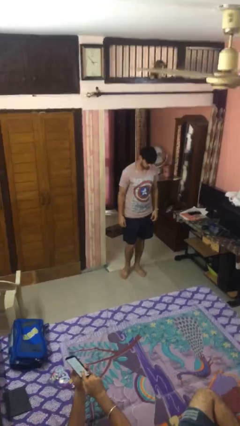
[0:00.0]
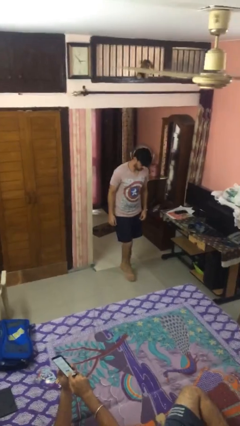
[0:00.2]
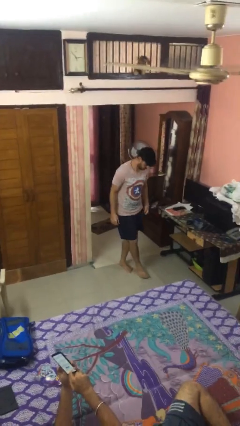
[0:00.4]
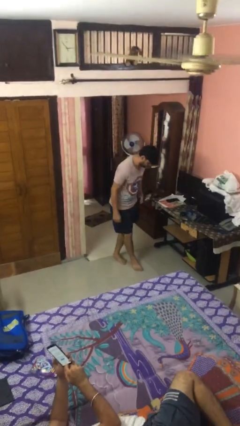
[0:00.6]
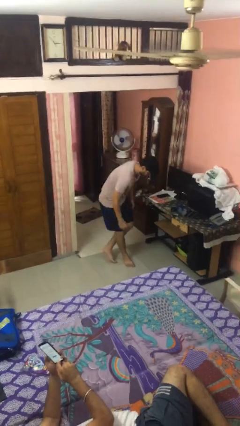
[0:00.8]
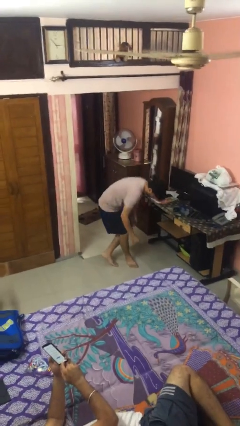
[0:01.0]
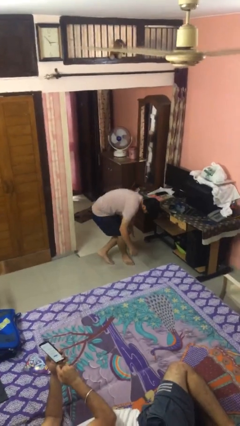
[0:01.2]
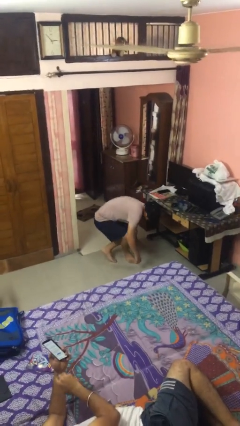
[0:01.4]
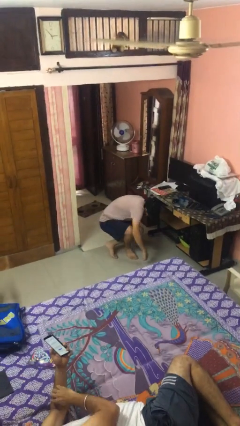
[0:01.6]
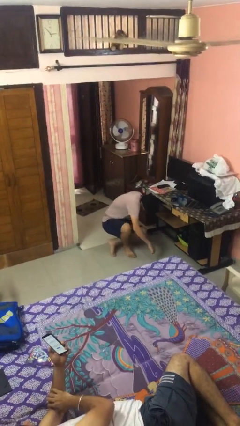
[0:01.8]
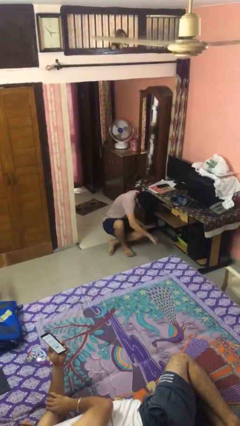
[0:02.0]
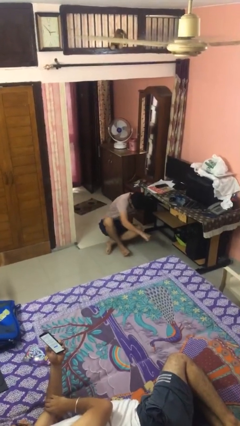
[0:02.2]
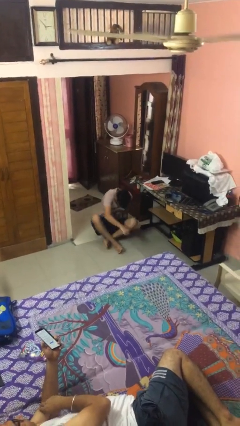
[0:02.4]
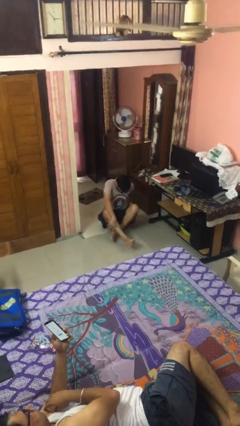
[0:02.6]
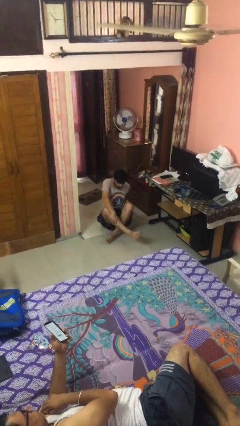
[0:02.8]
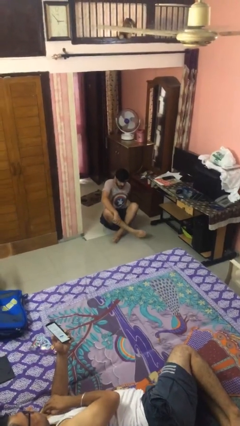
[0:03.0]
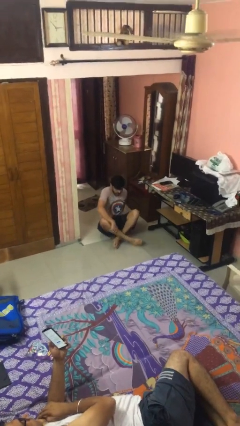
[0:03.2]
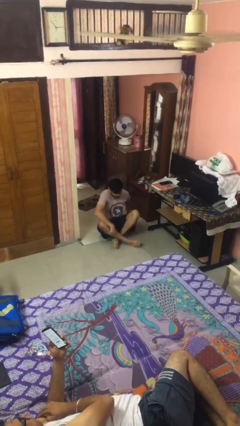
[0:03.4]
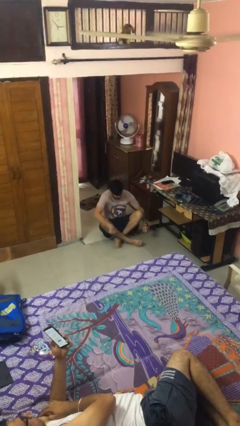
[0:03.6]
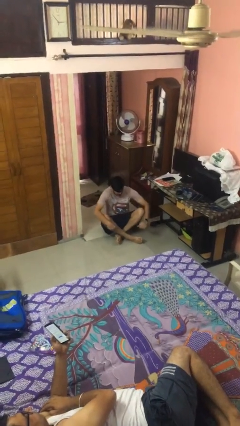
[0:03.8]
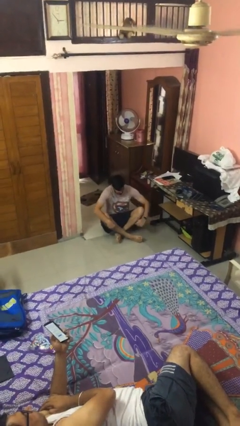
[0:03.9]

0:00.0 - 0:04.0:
person sits crisscross

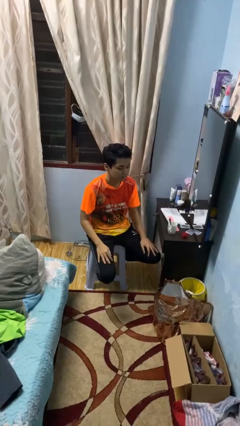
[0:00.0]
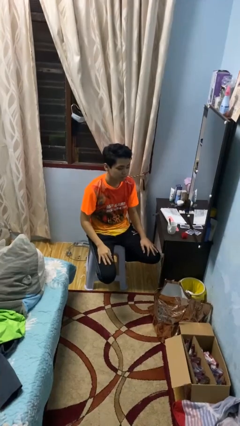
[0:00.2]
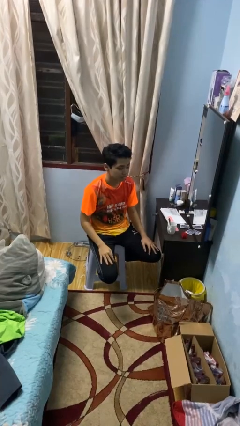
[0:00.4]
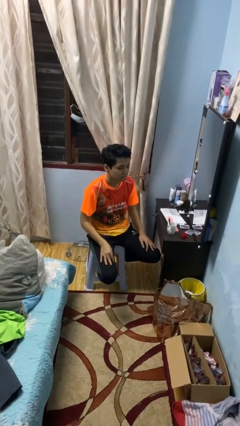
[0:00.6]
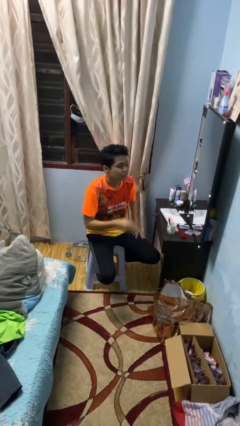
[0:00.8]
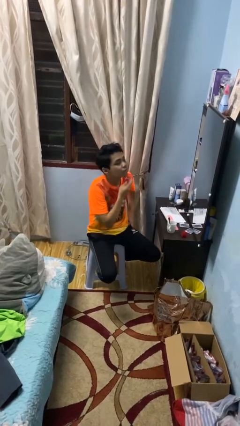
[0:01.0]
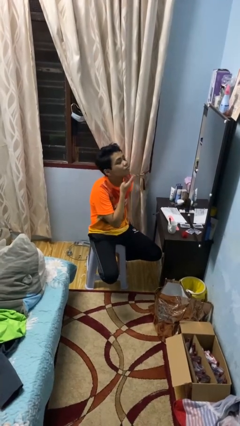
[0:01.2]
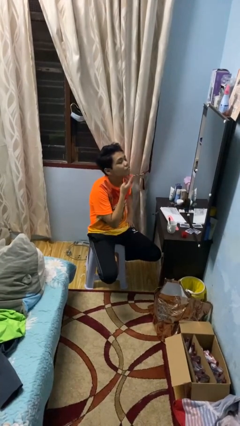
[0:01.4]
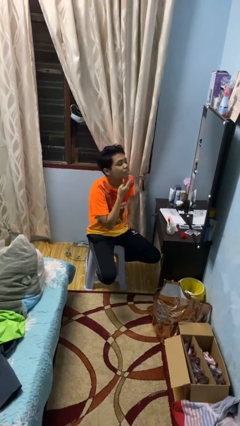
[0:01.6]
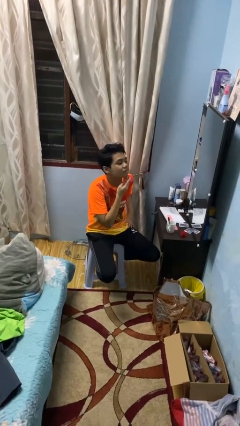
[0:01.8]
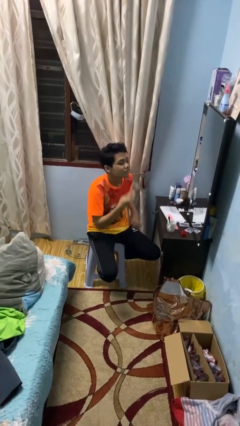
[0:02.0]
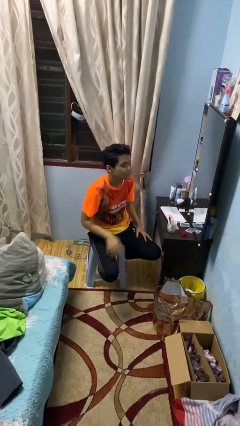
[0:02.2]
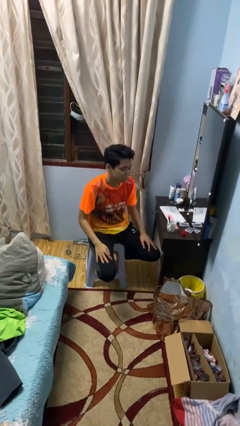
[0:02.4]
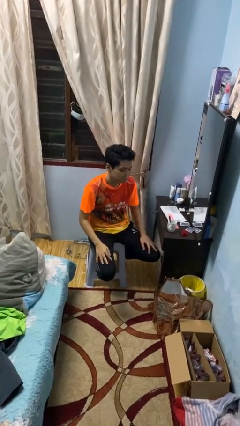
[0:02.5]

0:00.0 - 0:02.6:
person strokes chin

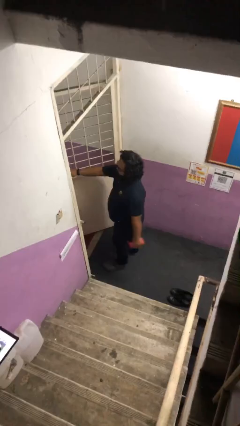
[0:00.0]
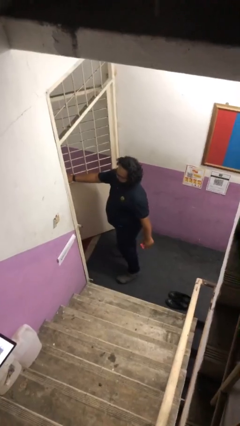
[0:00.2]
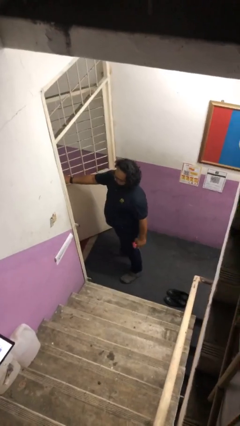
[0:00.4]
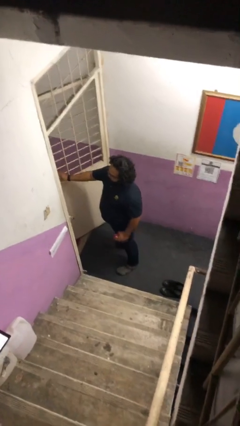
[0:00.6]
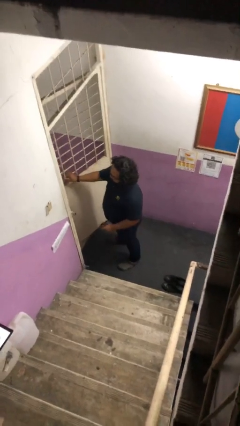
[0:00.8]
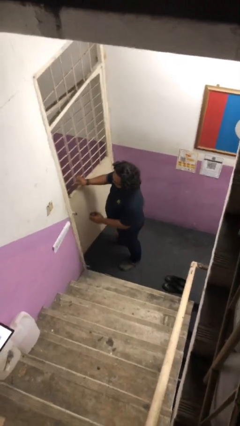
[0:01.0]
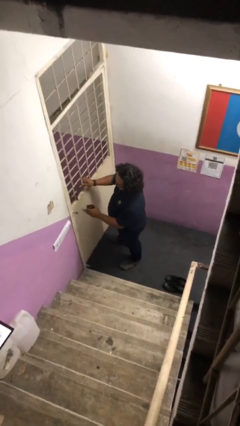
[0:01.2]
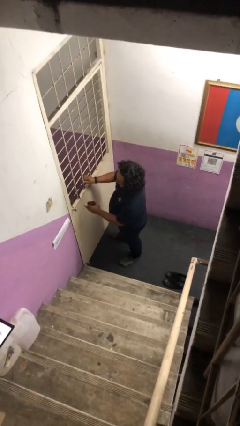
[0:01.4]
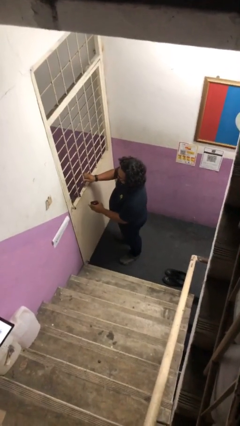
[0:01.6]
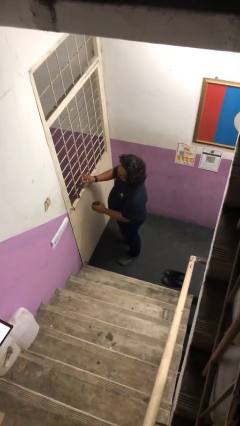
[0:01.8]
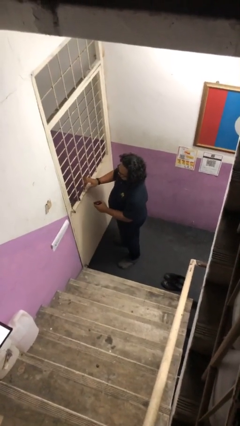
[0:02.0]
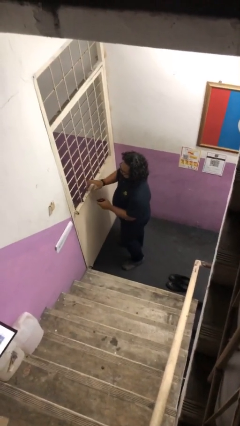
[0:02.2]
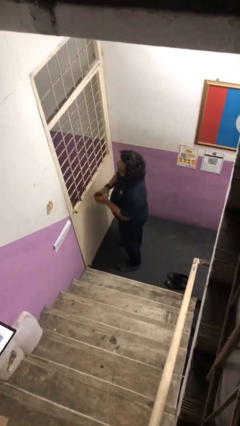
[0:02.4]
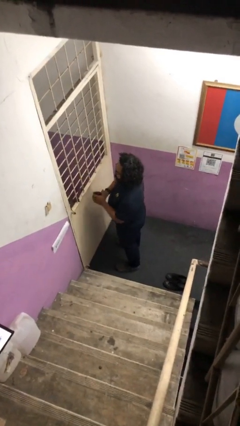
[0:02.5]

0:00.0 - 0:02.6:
person closes facility door

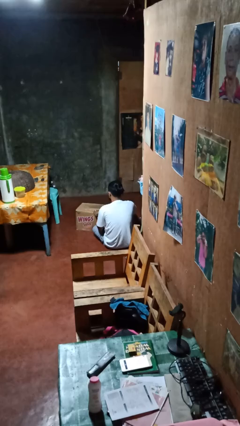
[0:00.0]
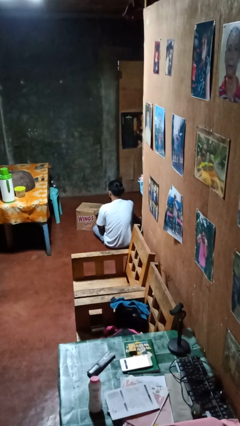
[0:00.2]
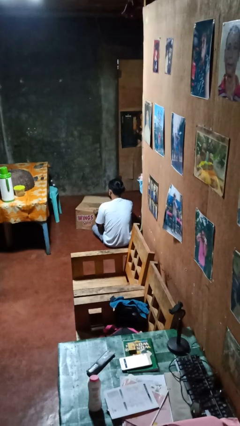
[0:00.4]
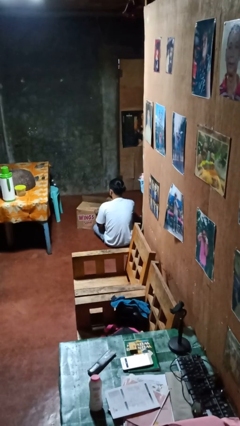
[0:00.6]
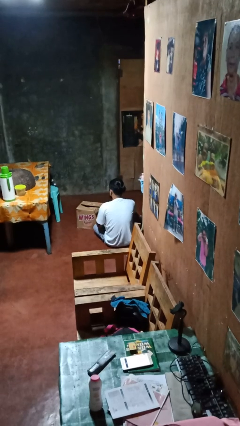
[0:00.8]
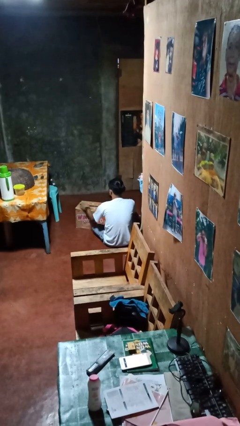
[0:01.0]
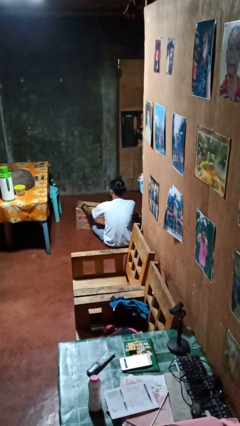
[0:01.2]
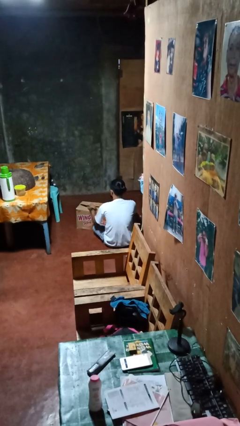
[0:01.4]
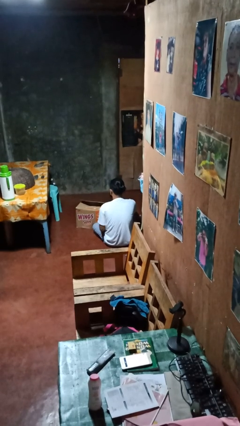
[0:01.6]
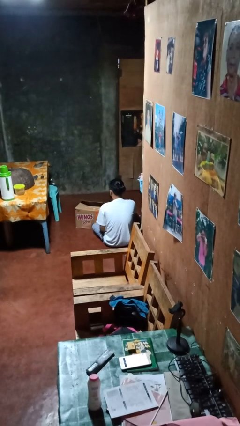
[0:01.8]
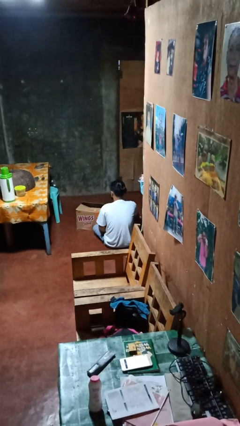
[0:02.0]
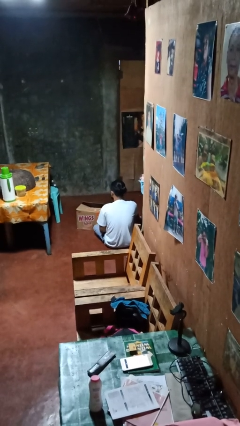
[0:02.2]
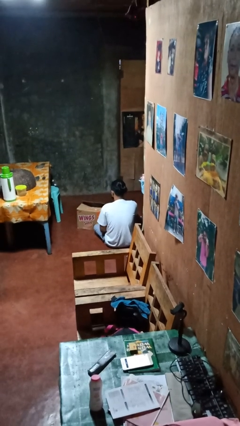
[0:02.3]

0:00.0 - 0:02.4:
person closes box

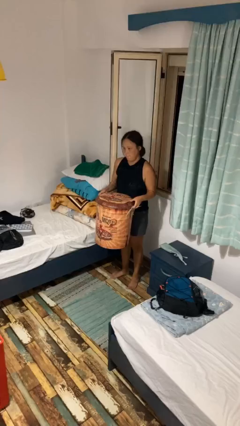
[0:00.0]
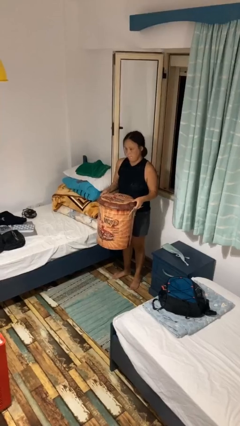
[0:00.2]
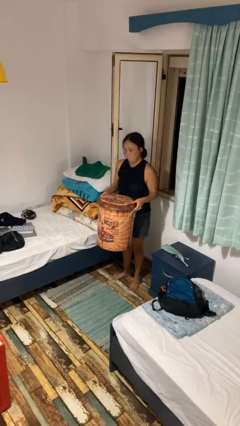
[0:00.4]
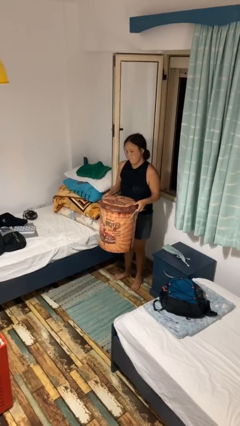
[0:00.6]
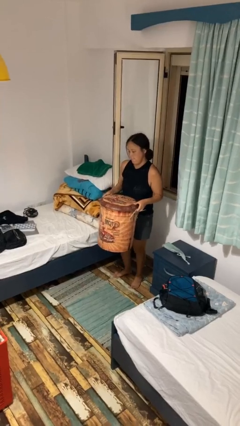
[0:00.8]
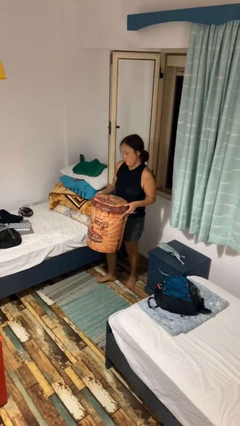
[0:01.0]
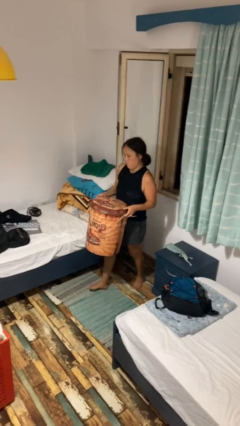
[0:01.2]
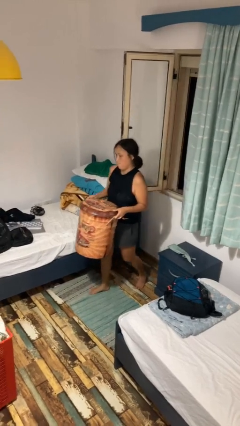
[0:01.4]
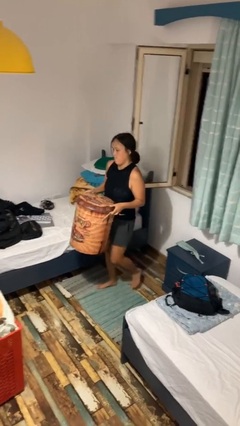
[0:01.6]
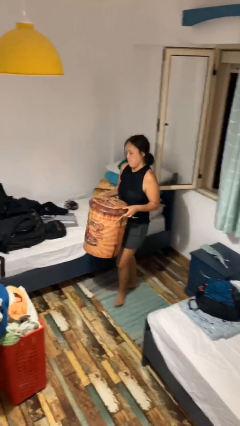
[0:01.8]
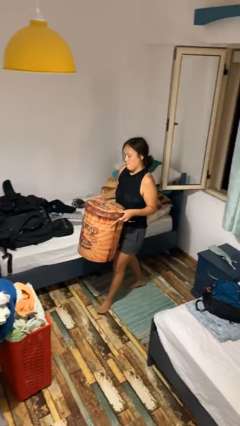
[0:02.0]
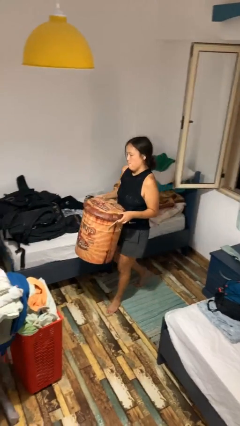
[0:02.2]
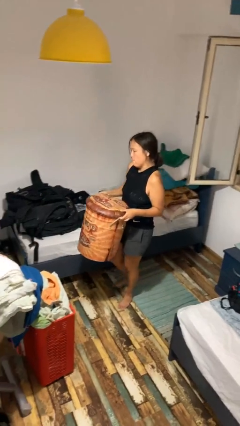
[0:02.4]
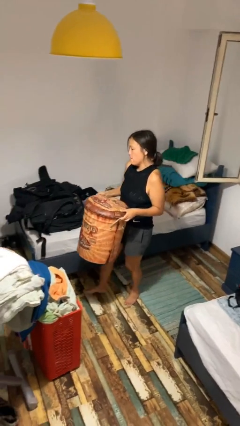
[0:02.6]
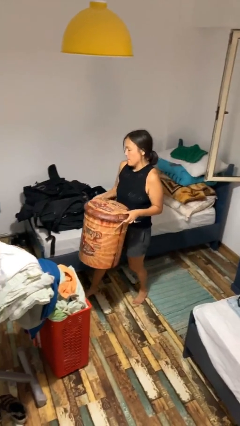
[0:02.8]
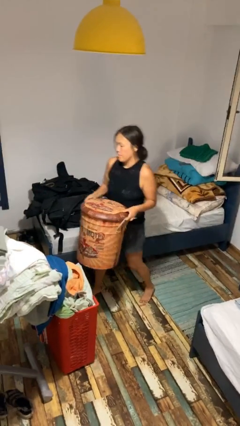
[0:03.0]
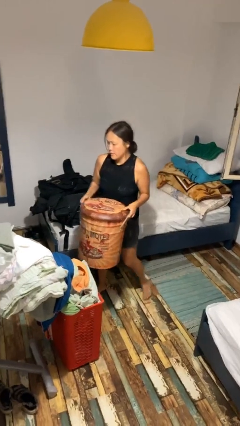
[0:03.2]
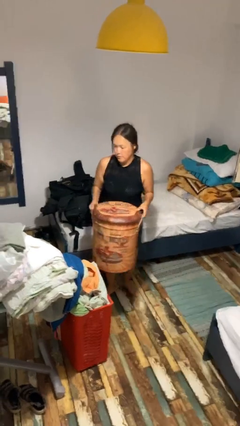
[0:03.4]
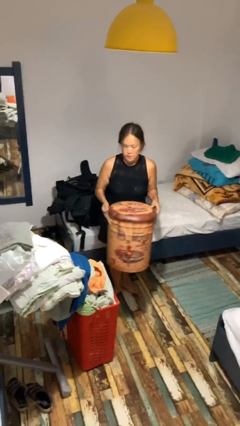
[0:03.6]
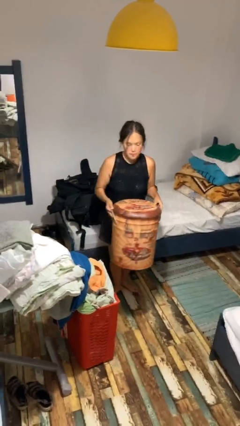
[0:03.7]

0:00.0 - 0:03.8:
person carries furniture

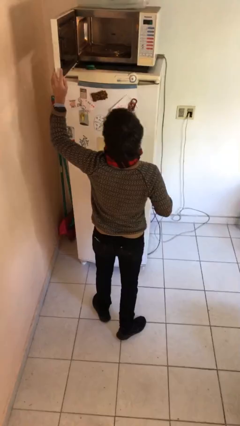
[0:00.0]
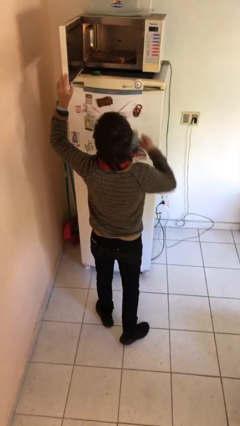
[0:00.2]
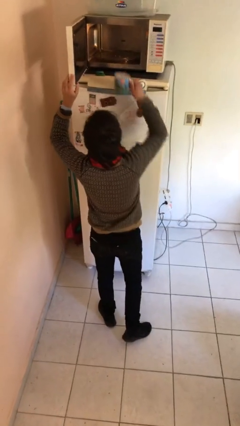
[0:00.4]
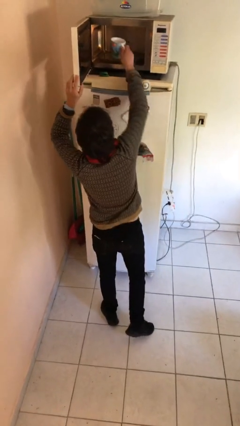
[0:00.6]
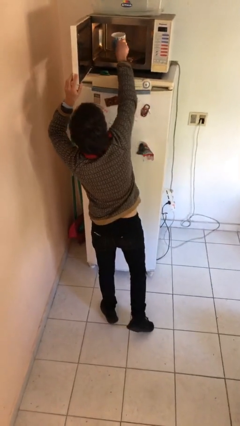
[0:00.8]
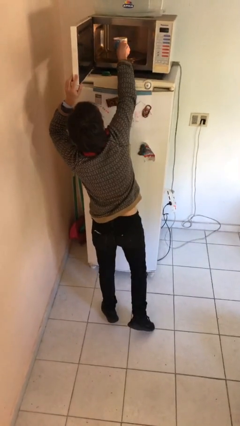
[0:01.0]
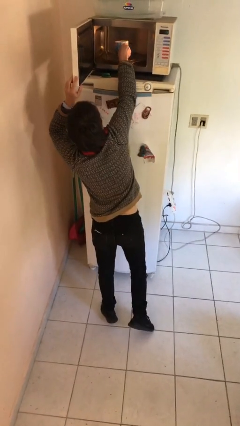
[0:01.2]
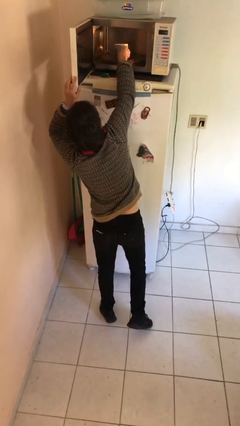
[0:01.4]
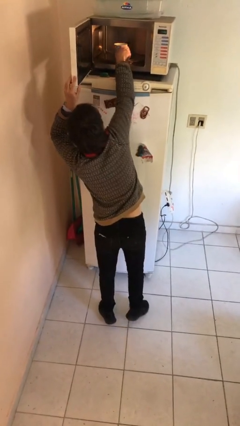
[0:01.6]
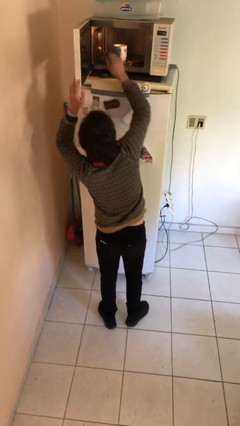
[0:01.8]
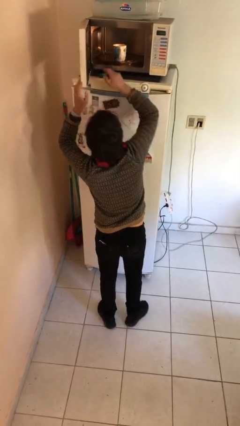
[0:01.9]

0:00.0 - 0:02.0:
person puts object into microwave

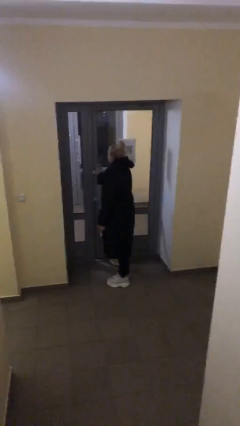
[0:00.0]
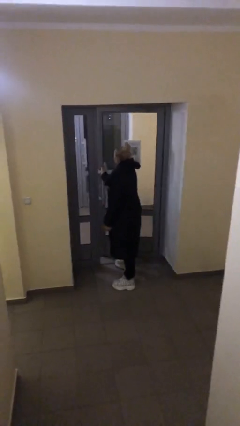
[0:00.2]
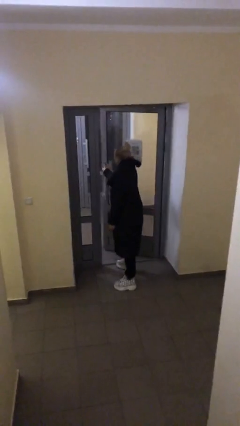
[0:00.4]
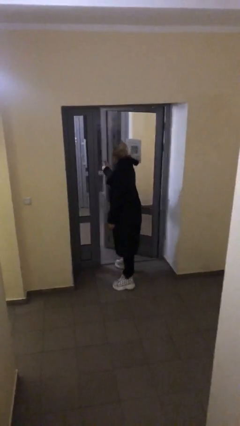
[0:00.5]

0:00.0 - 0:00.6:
person opens facility door
